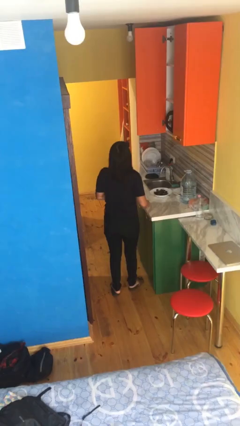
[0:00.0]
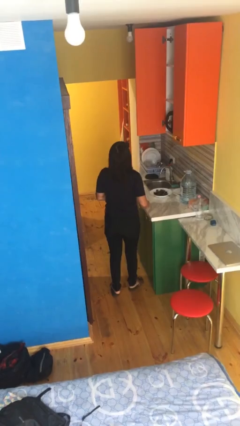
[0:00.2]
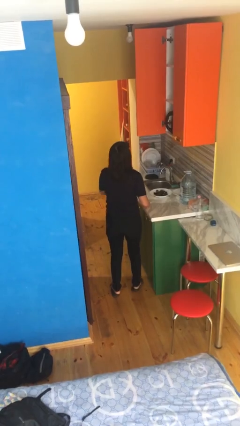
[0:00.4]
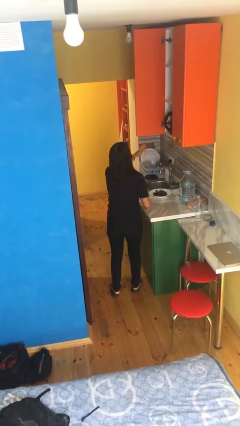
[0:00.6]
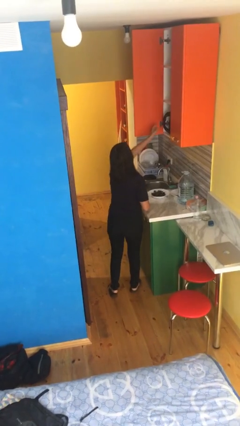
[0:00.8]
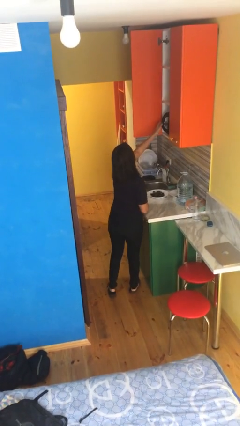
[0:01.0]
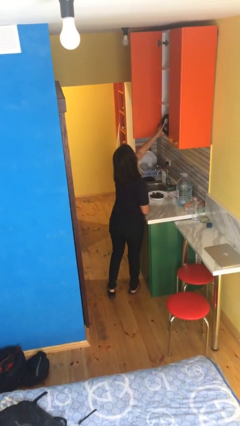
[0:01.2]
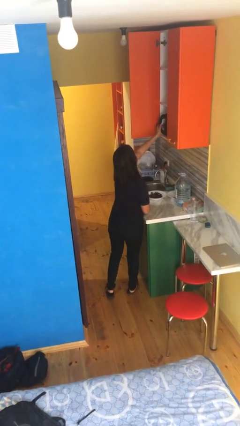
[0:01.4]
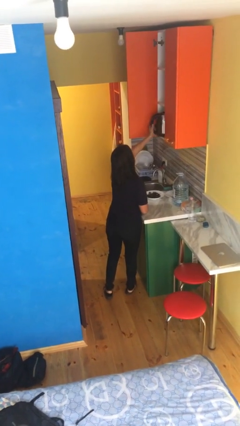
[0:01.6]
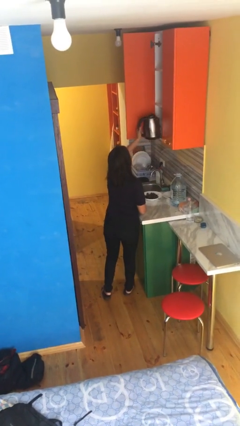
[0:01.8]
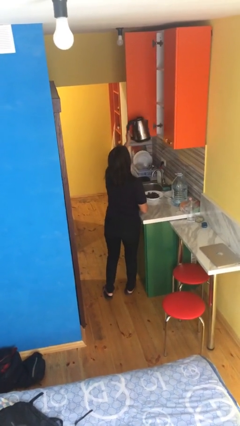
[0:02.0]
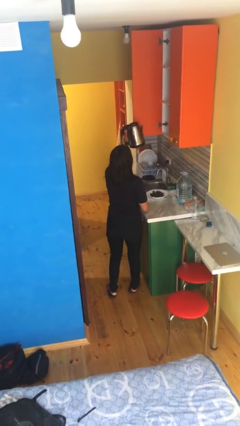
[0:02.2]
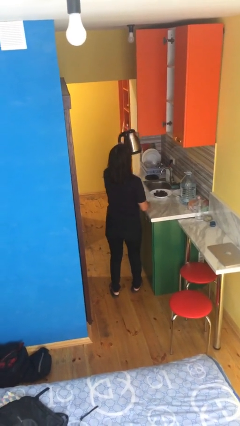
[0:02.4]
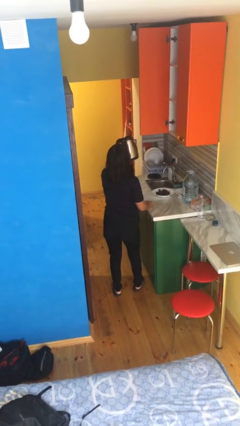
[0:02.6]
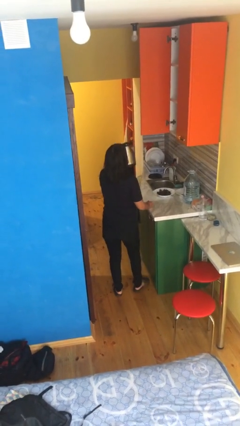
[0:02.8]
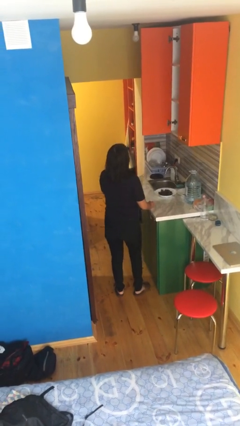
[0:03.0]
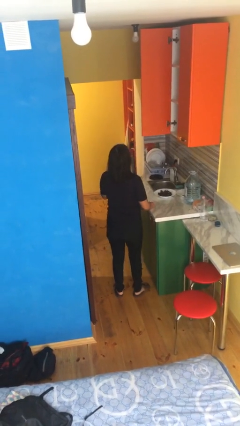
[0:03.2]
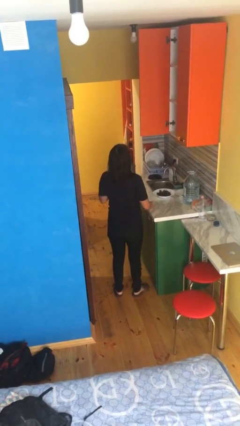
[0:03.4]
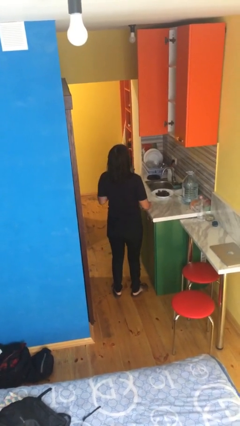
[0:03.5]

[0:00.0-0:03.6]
person picks up object from cabinet

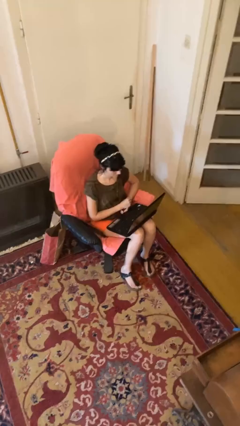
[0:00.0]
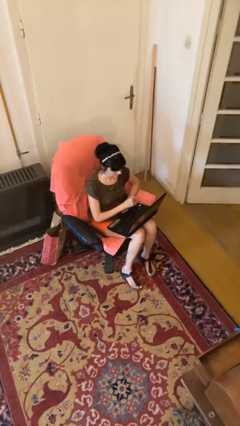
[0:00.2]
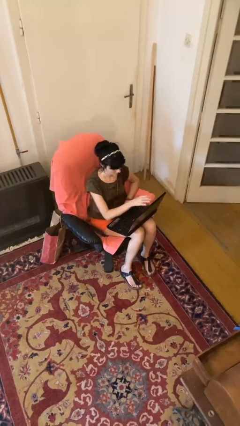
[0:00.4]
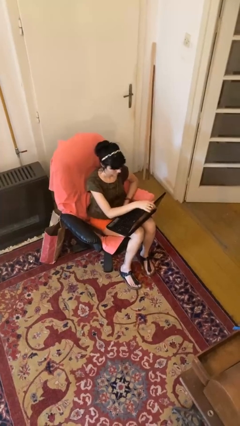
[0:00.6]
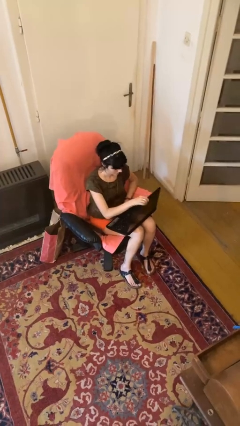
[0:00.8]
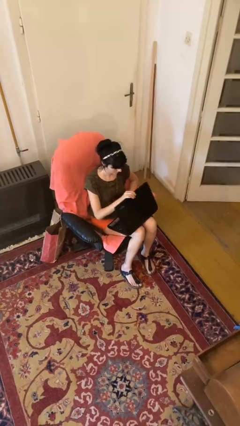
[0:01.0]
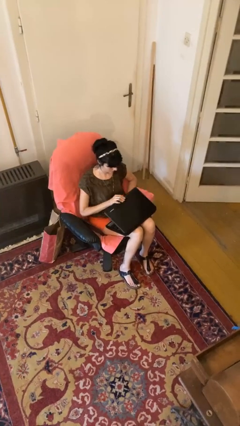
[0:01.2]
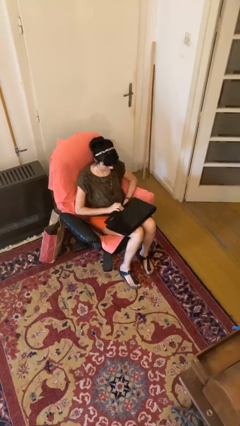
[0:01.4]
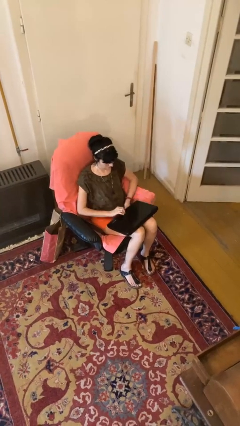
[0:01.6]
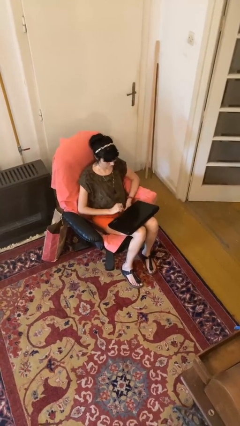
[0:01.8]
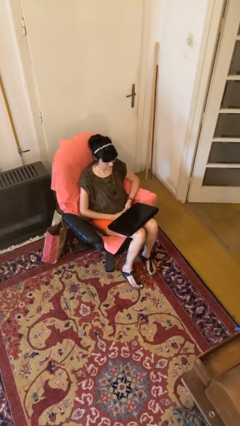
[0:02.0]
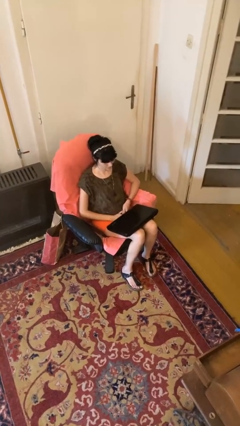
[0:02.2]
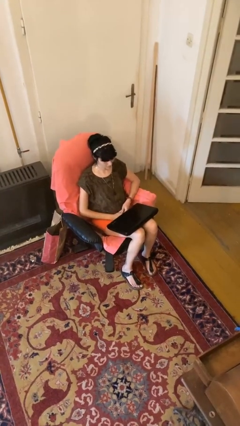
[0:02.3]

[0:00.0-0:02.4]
person closes laptop

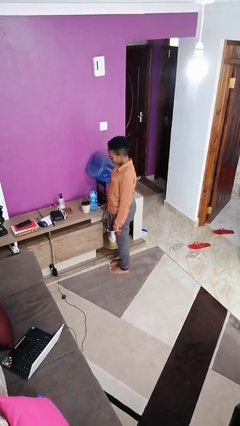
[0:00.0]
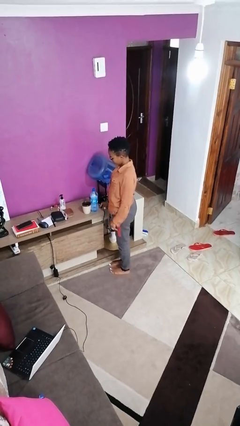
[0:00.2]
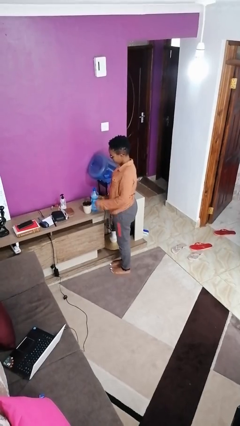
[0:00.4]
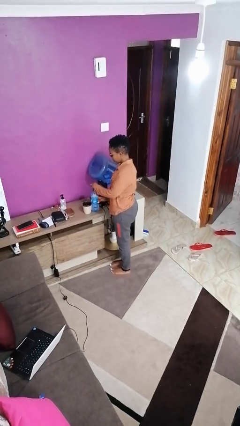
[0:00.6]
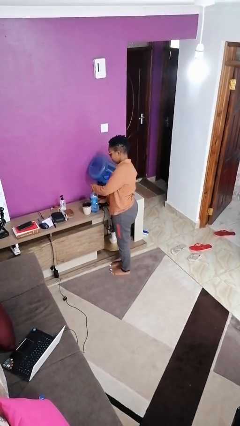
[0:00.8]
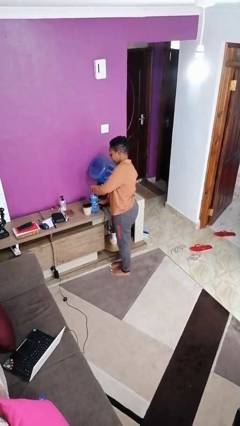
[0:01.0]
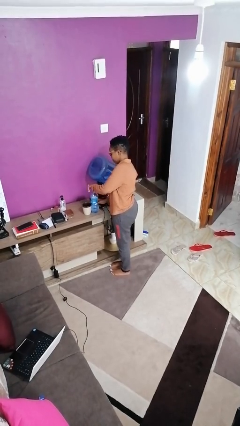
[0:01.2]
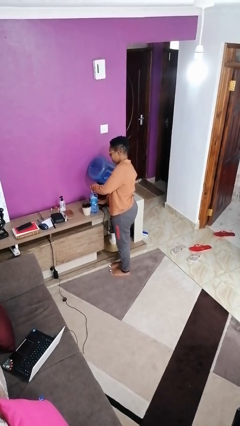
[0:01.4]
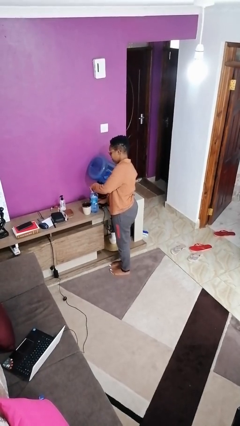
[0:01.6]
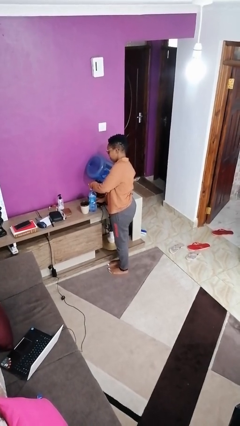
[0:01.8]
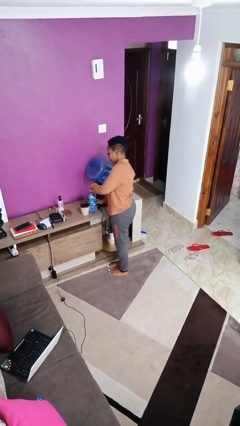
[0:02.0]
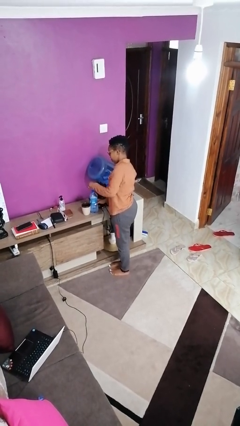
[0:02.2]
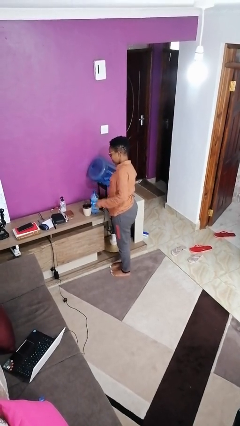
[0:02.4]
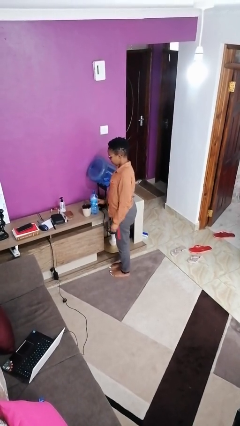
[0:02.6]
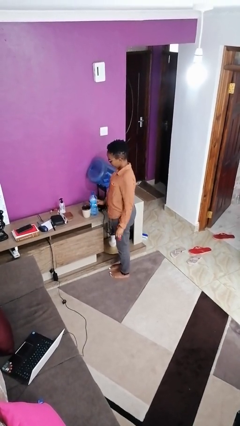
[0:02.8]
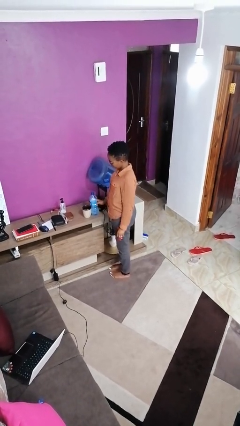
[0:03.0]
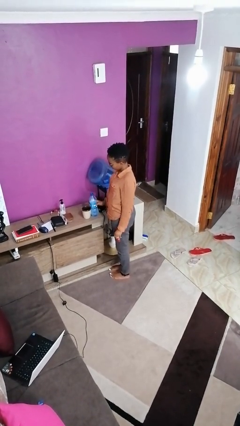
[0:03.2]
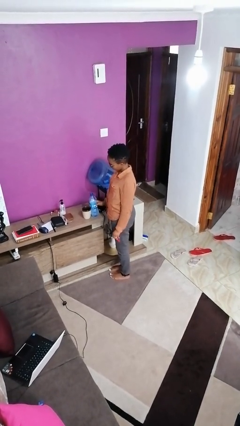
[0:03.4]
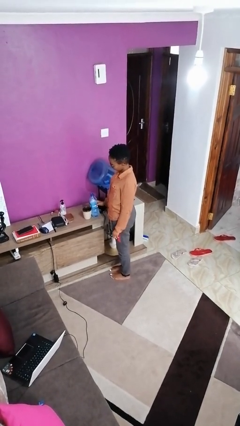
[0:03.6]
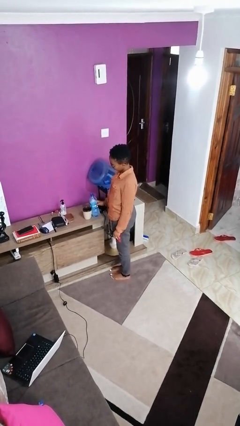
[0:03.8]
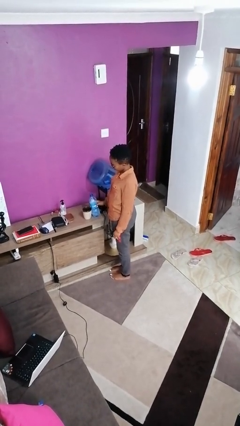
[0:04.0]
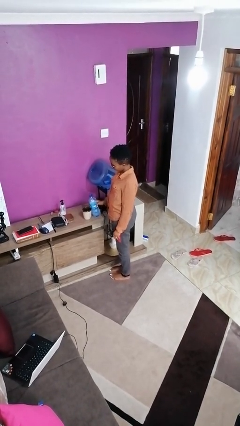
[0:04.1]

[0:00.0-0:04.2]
person unscrews lid from bottle

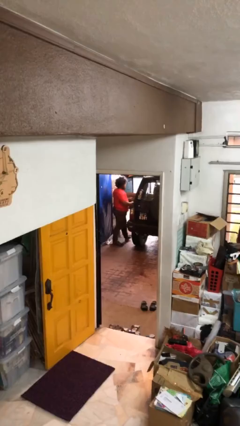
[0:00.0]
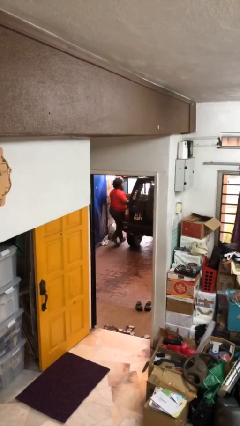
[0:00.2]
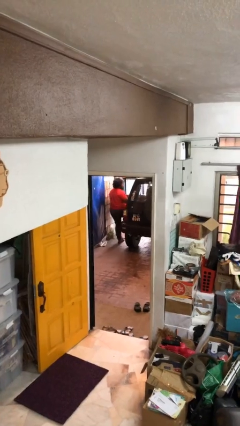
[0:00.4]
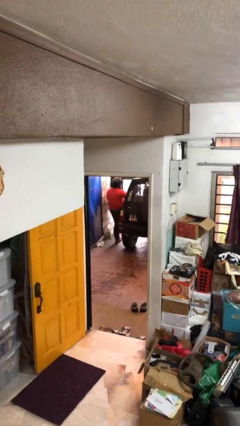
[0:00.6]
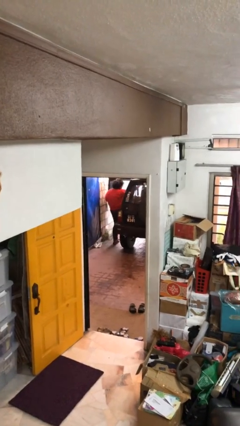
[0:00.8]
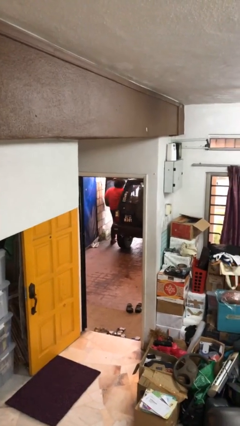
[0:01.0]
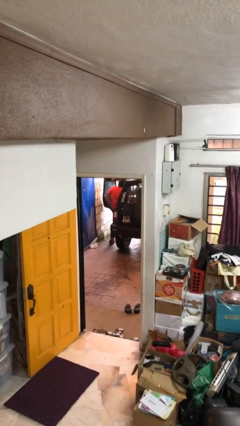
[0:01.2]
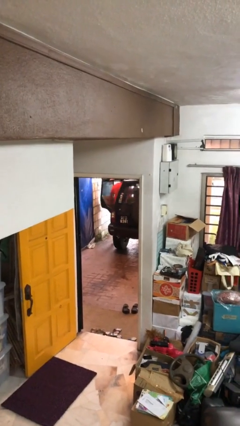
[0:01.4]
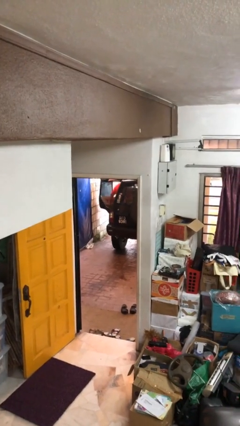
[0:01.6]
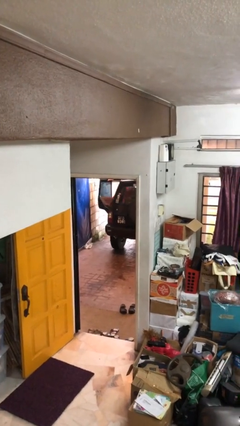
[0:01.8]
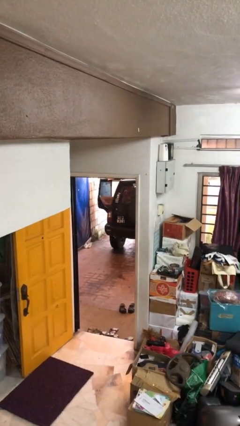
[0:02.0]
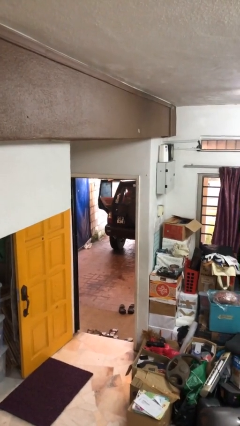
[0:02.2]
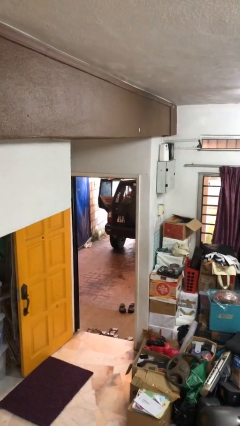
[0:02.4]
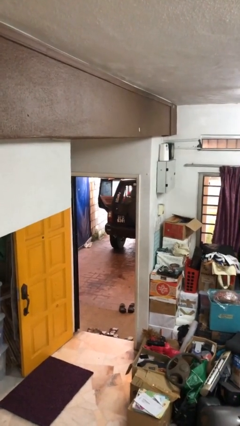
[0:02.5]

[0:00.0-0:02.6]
person enters car

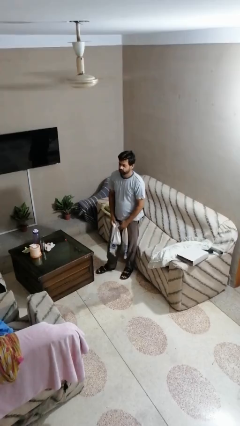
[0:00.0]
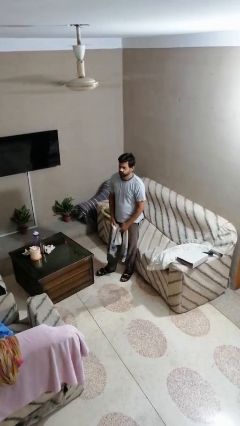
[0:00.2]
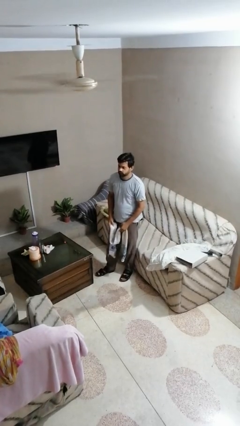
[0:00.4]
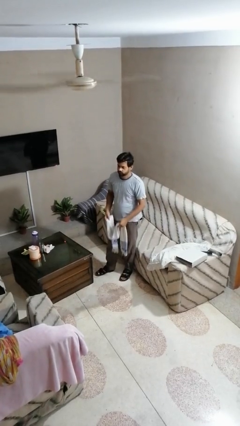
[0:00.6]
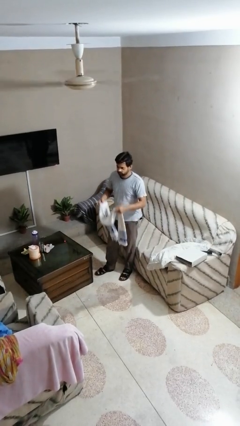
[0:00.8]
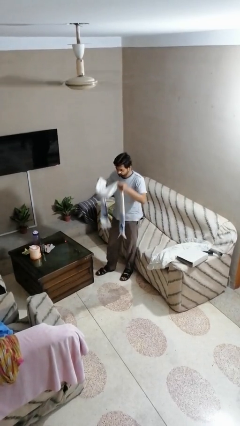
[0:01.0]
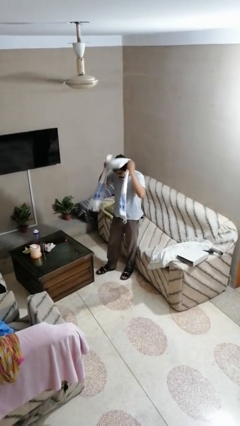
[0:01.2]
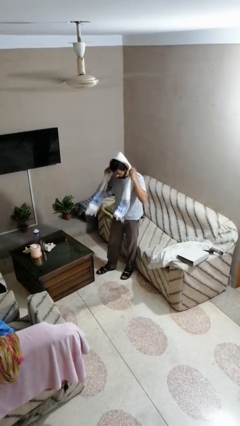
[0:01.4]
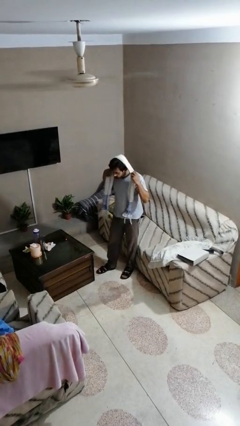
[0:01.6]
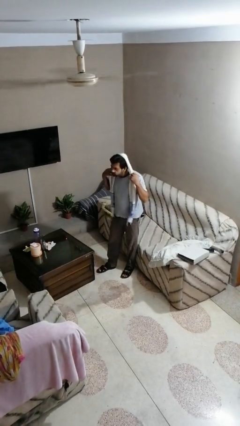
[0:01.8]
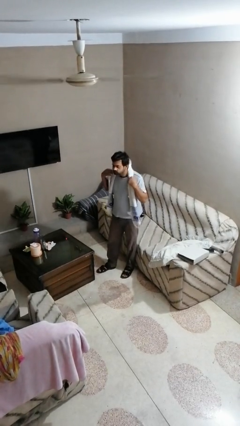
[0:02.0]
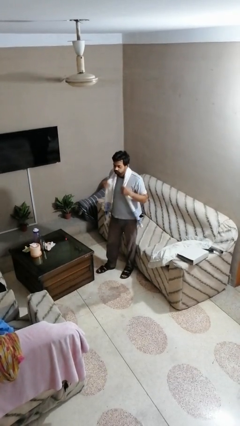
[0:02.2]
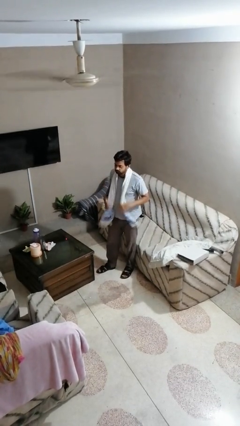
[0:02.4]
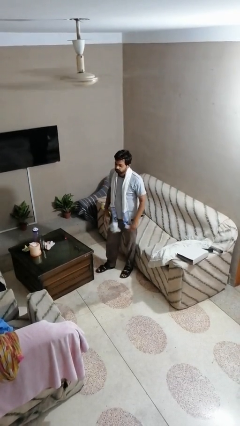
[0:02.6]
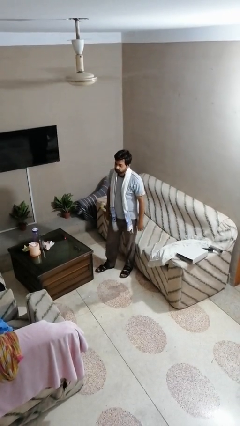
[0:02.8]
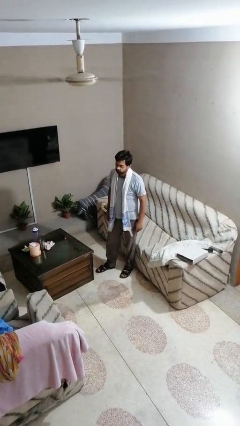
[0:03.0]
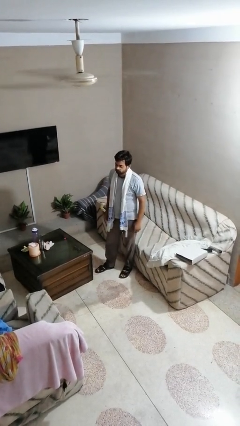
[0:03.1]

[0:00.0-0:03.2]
person puts on scarf

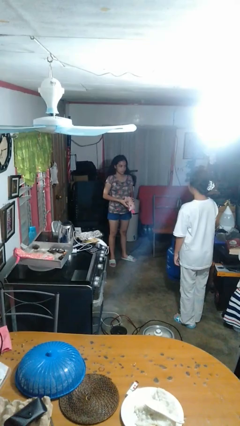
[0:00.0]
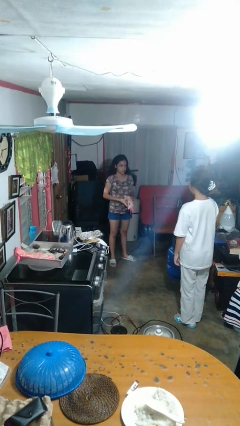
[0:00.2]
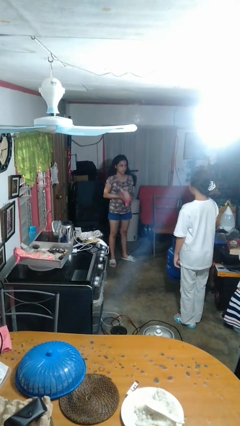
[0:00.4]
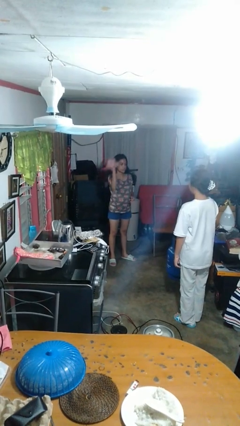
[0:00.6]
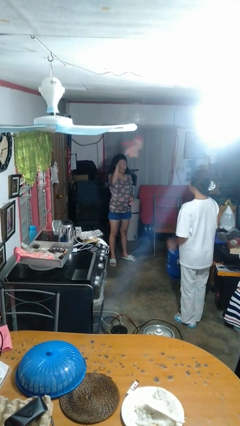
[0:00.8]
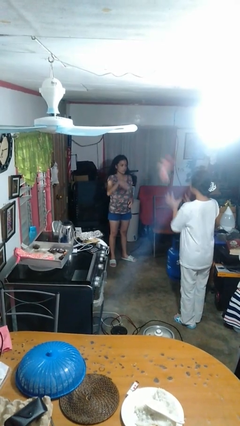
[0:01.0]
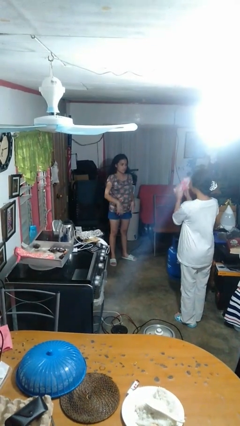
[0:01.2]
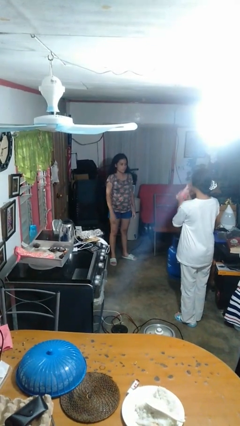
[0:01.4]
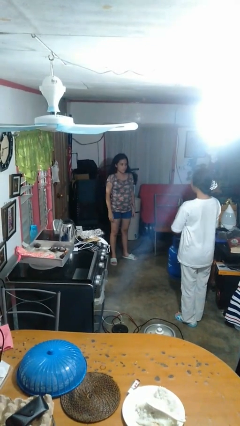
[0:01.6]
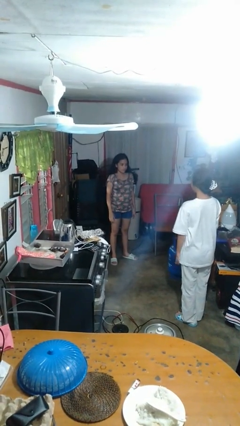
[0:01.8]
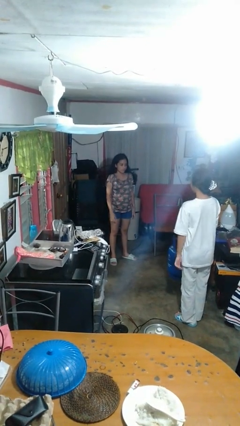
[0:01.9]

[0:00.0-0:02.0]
person throws object to person
